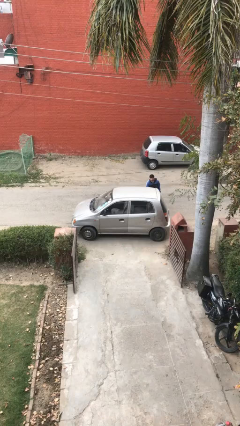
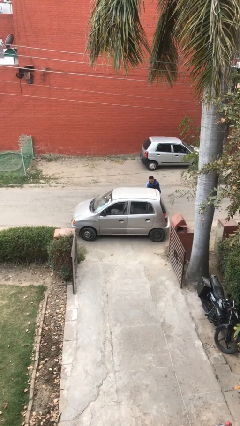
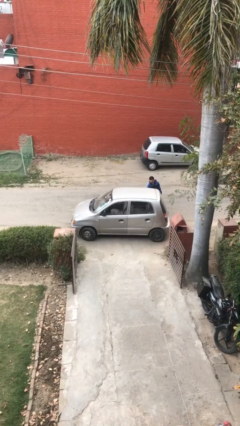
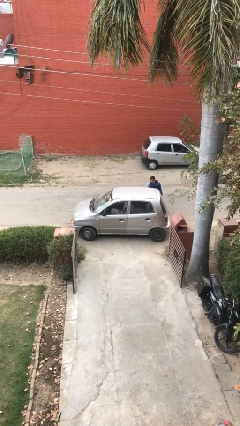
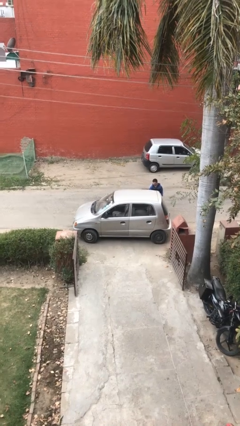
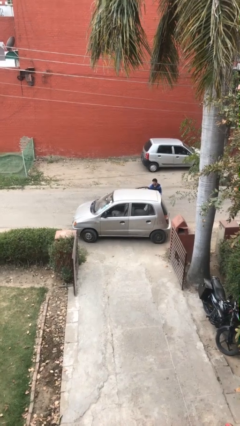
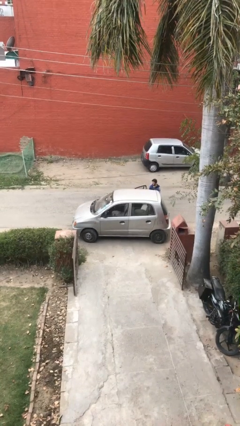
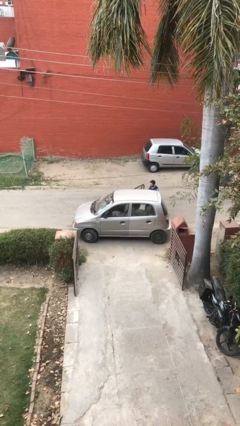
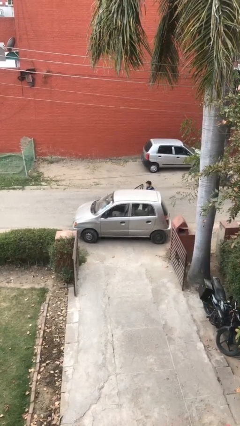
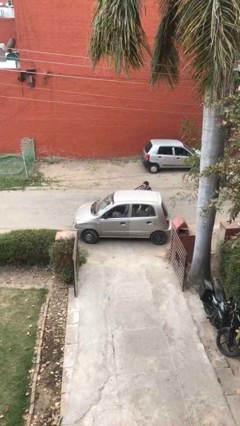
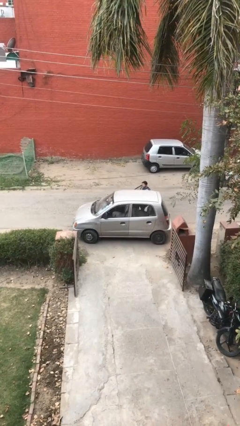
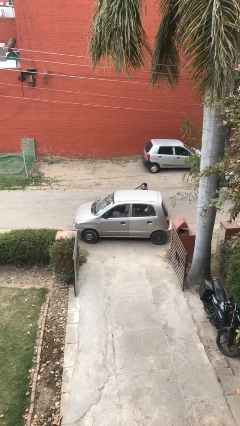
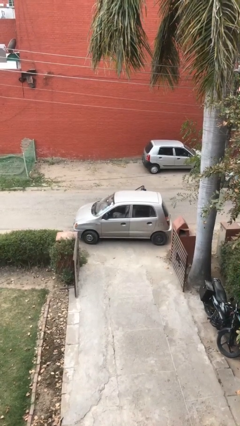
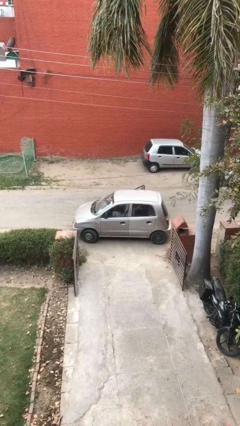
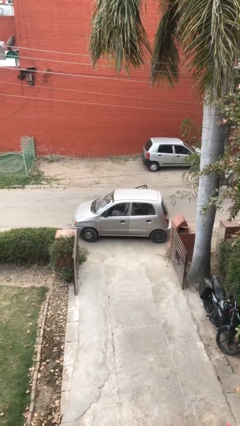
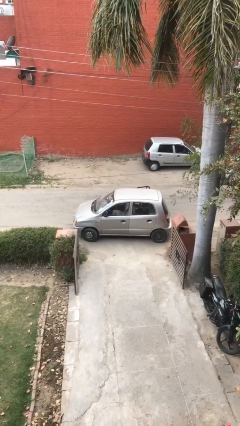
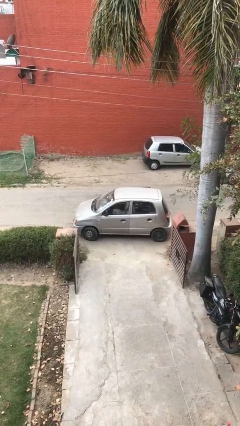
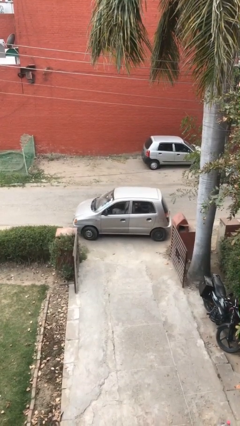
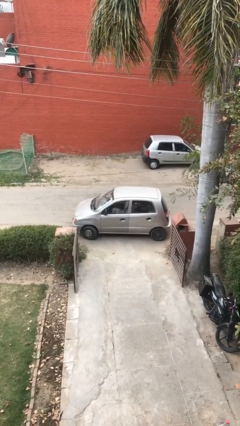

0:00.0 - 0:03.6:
car picks up person

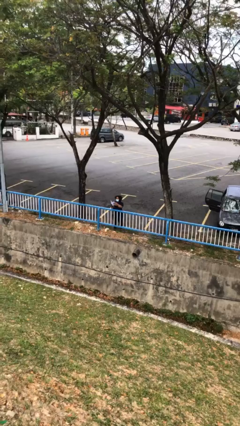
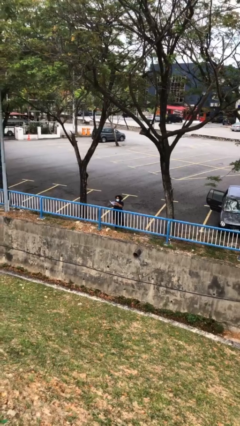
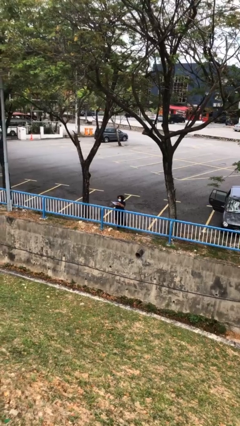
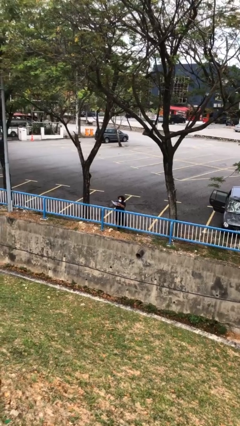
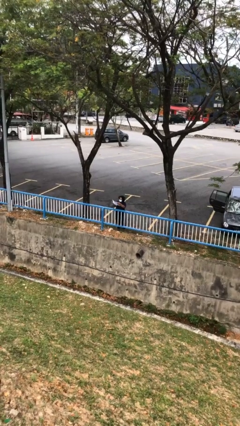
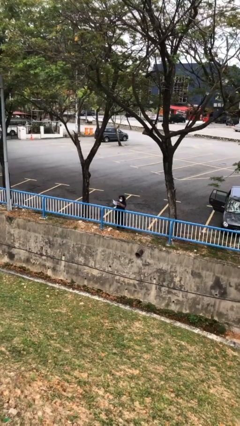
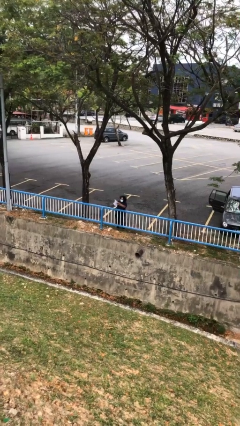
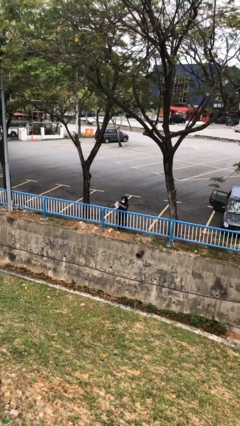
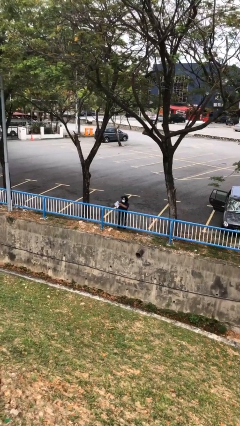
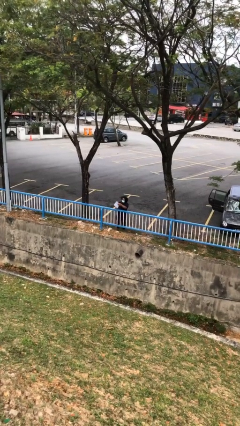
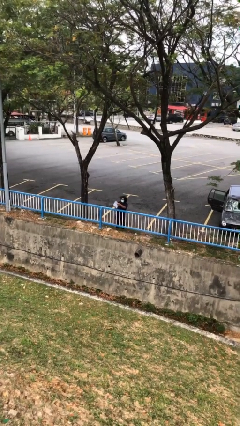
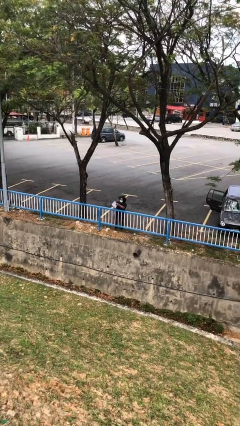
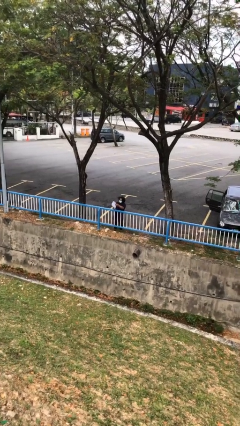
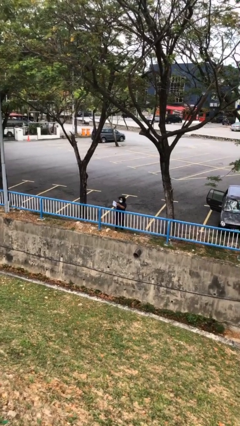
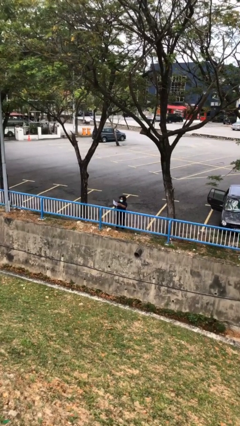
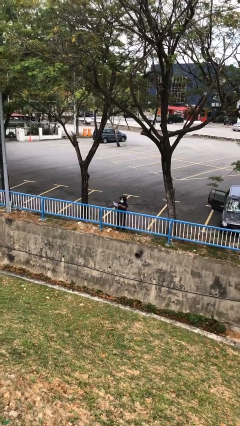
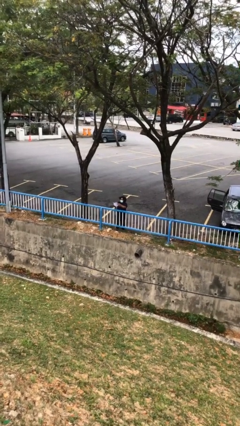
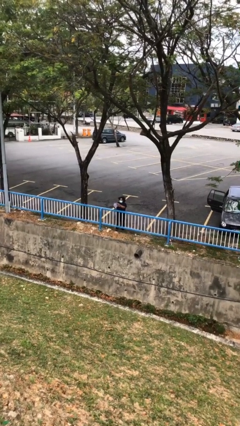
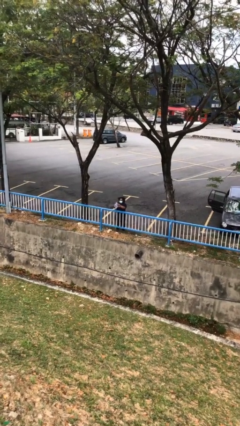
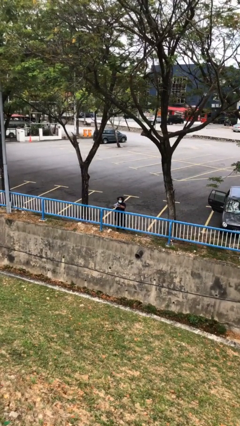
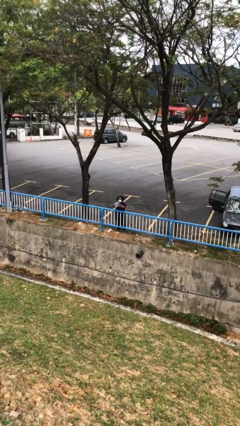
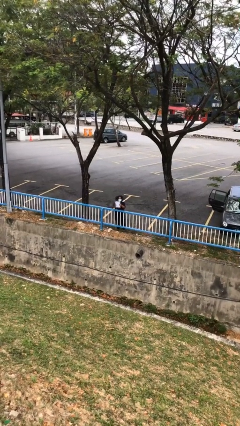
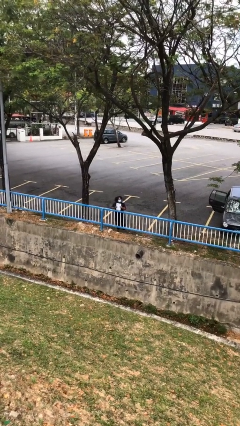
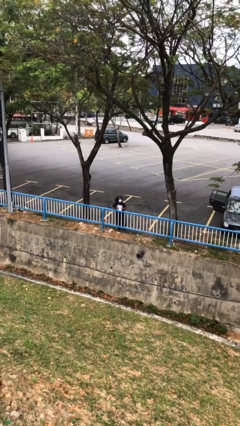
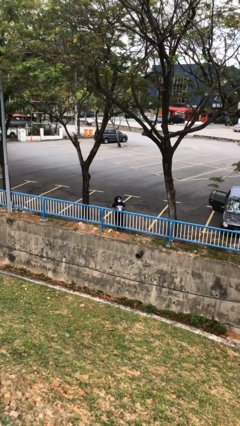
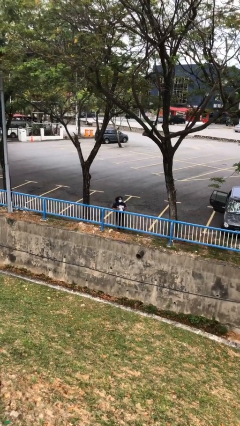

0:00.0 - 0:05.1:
person reads document

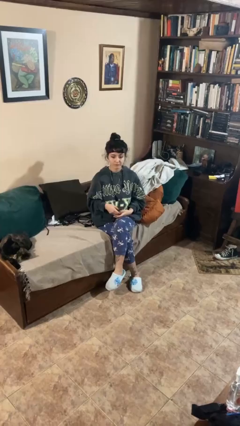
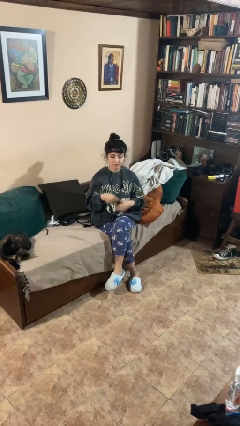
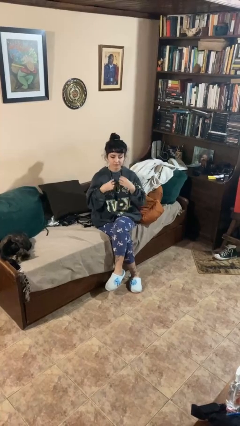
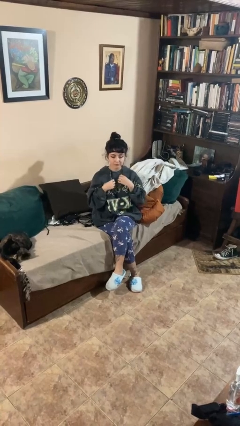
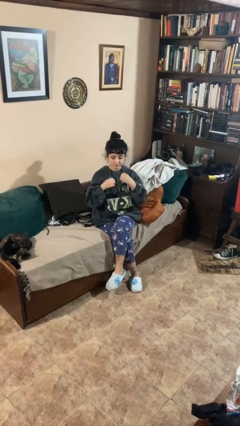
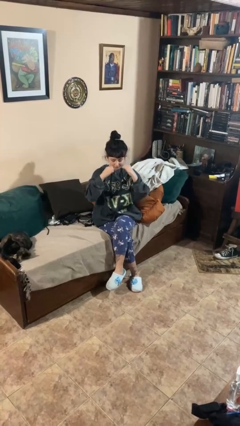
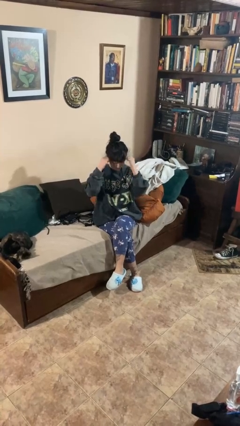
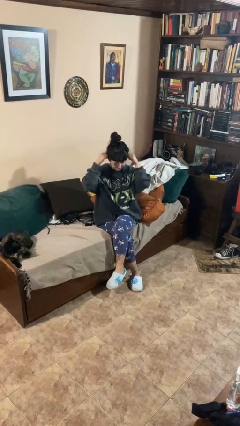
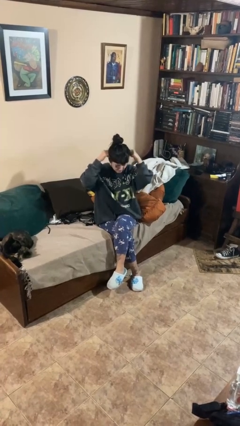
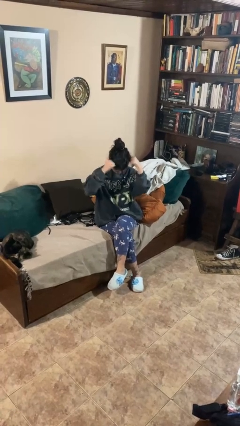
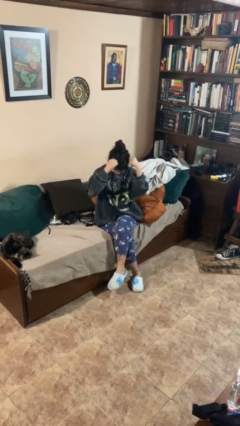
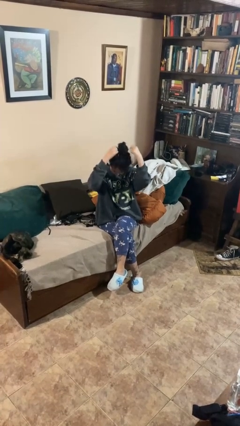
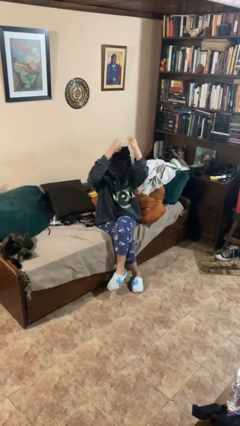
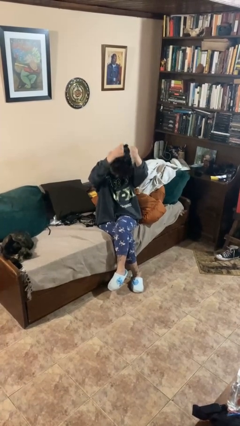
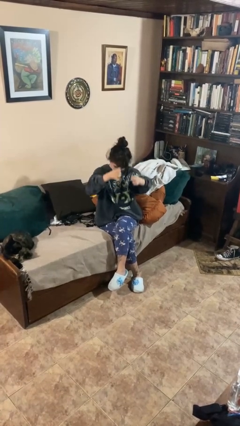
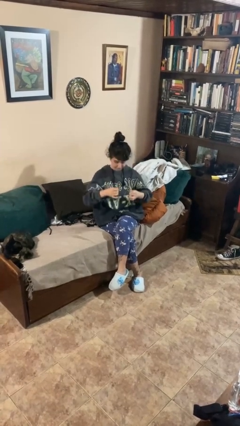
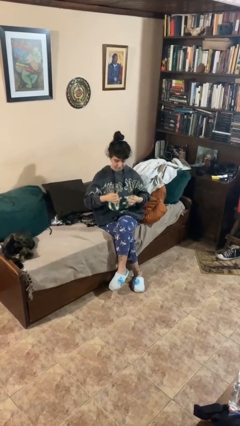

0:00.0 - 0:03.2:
person takes off necklace

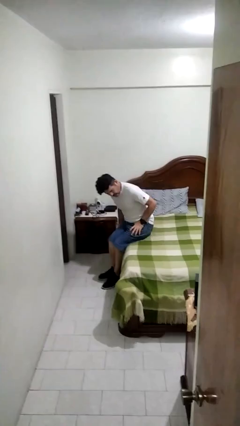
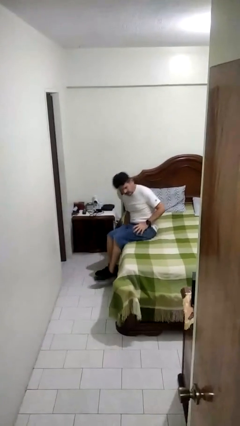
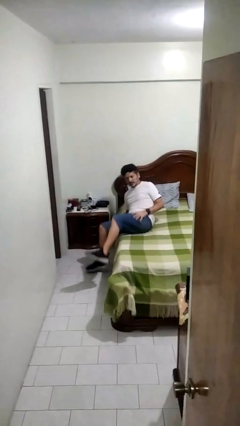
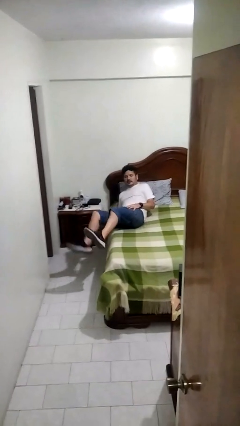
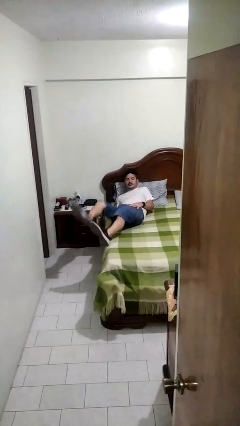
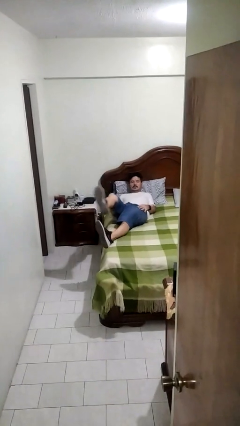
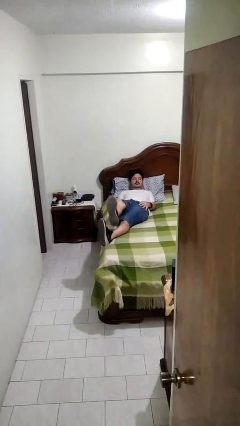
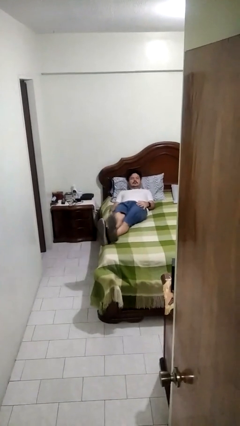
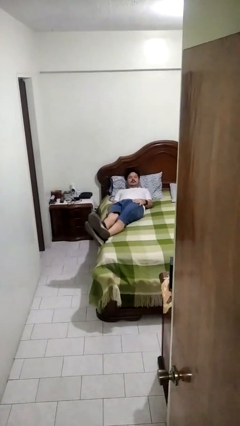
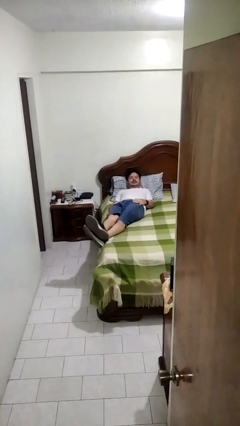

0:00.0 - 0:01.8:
person lies down on bed

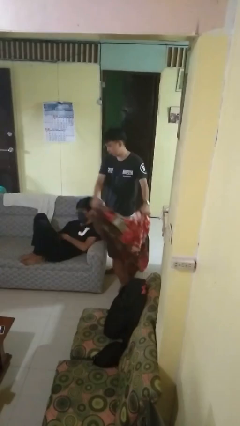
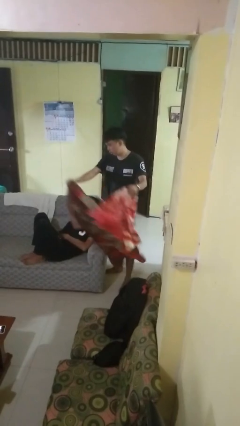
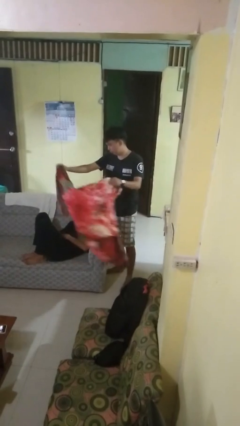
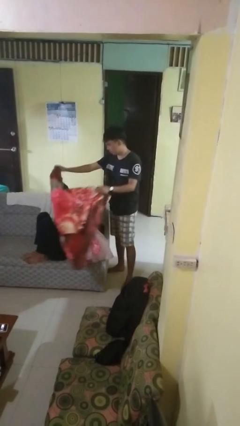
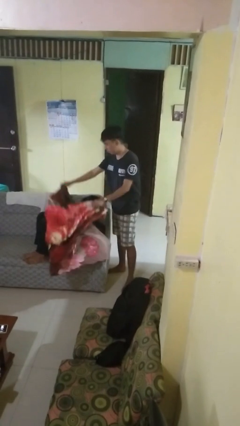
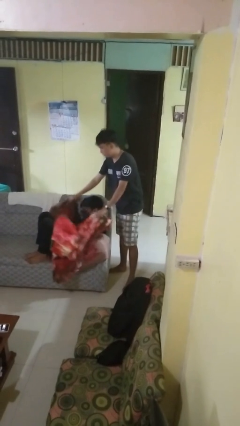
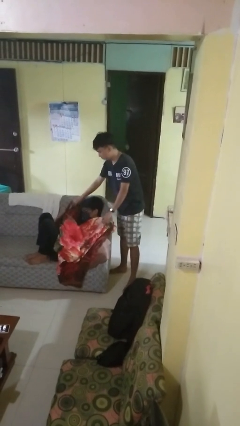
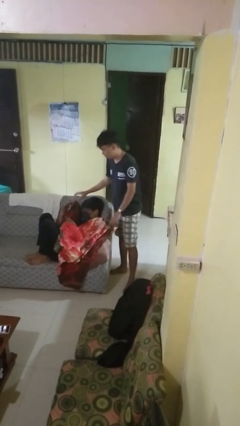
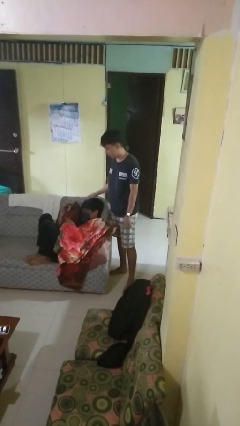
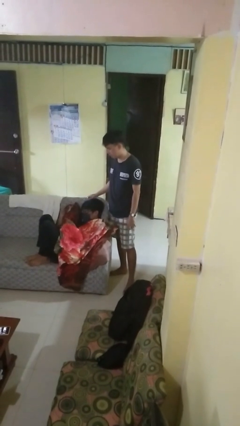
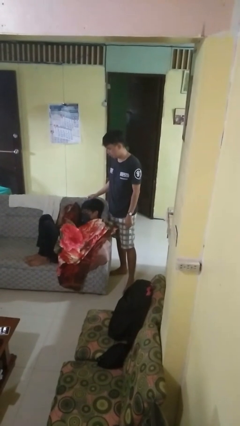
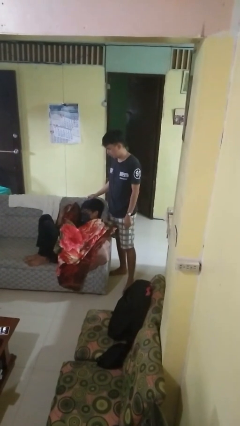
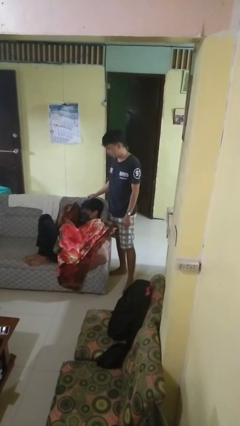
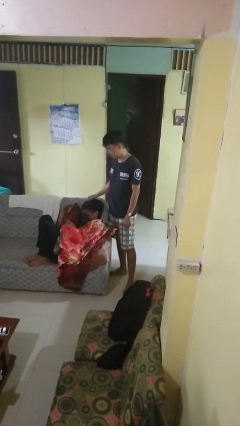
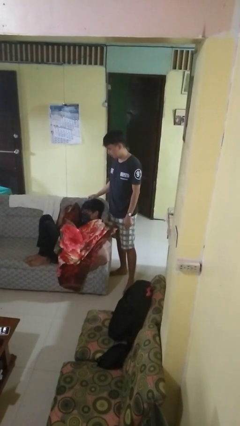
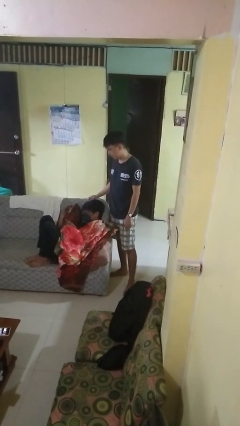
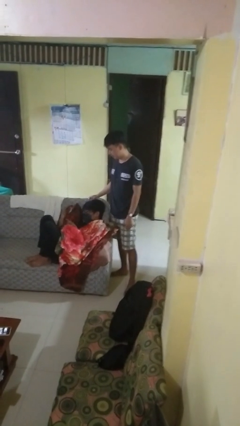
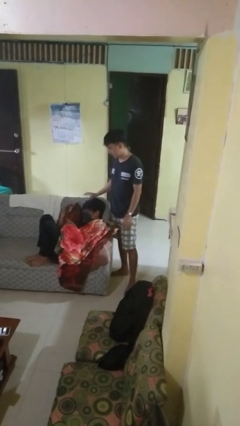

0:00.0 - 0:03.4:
person covers friend with blanket
